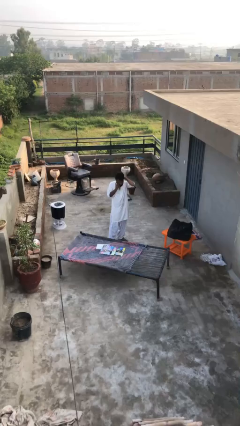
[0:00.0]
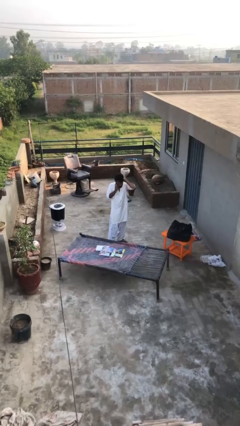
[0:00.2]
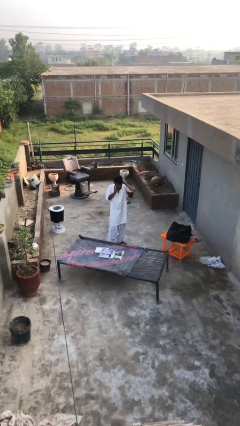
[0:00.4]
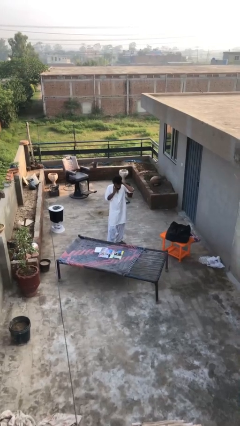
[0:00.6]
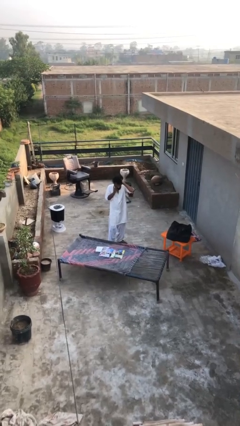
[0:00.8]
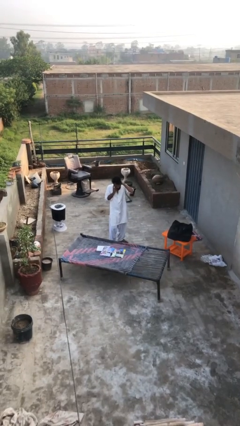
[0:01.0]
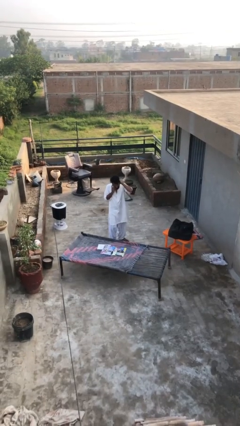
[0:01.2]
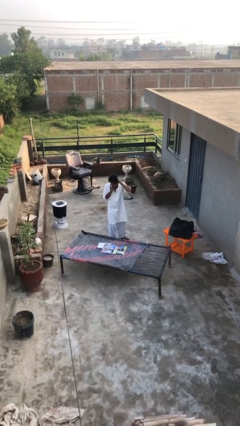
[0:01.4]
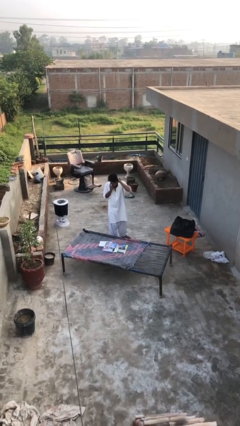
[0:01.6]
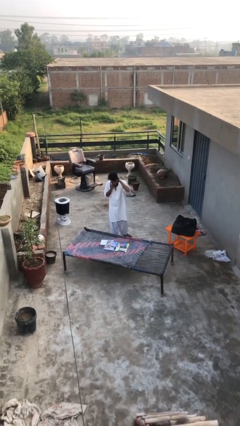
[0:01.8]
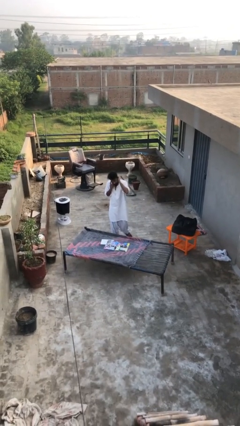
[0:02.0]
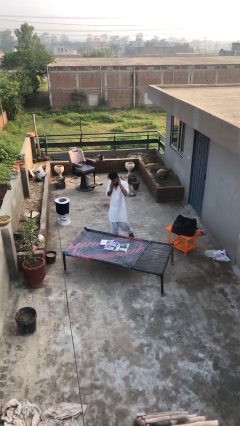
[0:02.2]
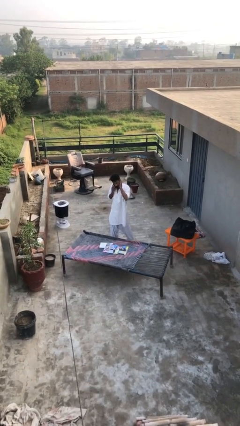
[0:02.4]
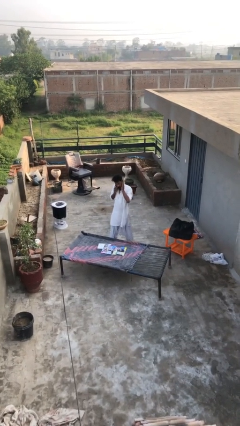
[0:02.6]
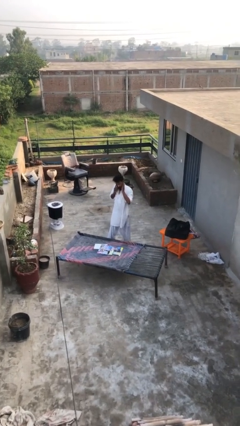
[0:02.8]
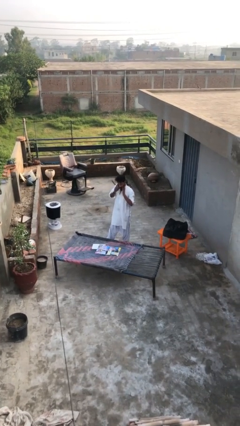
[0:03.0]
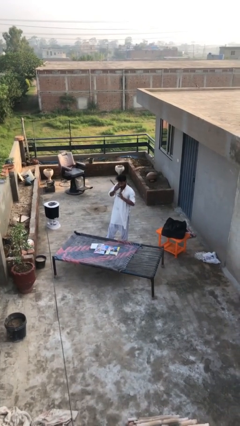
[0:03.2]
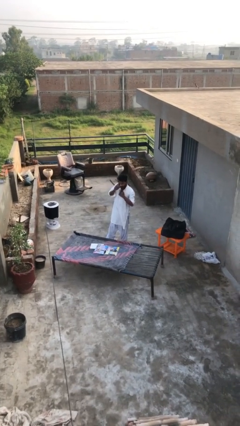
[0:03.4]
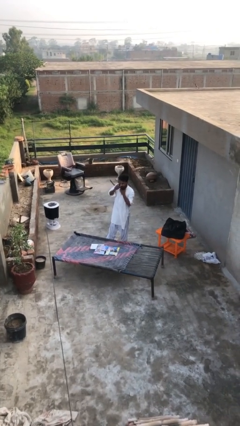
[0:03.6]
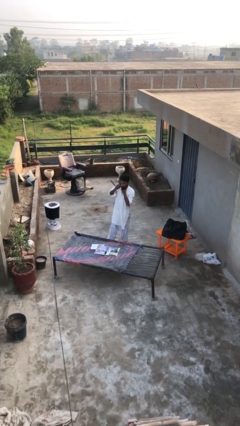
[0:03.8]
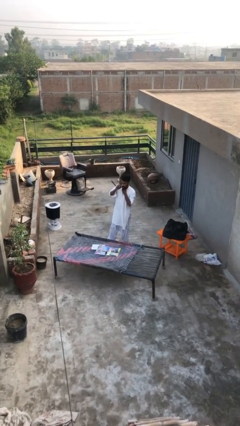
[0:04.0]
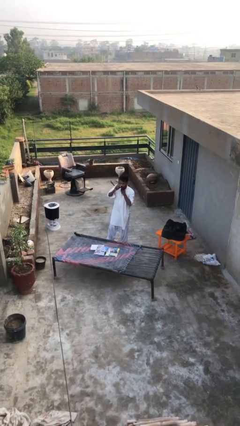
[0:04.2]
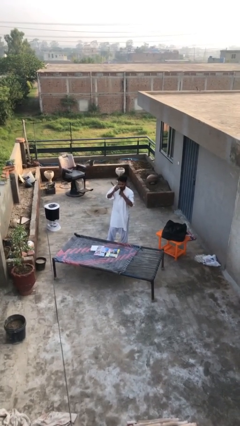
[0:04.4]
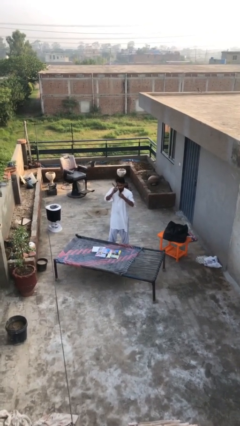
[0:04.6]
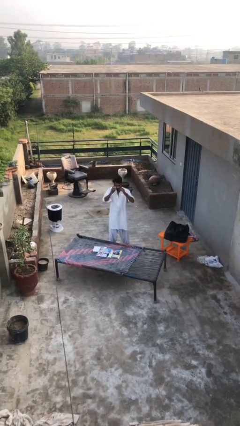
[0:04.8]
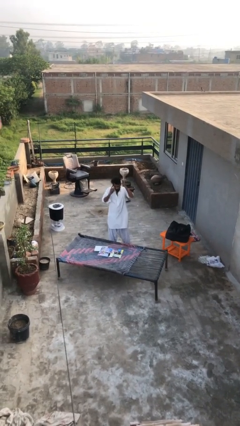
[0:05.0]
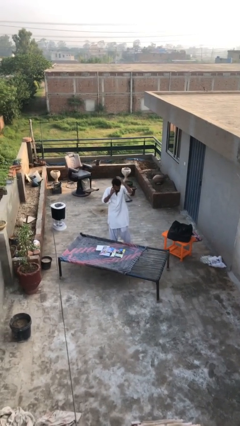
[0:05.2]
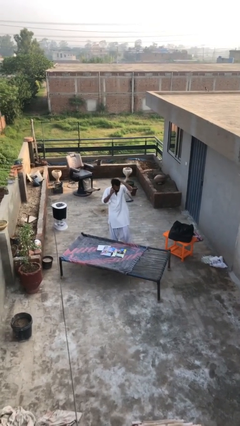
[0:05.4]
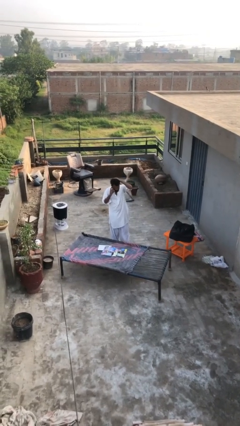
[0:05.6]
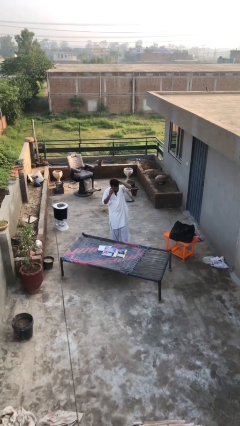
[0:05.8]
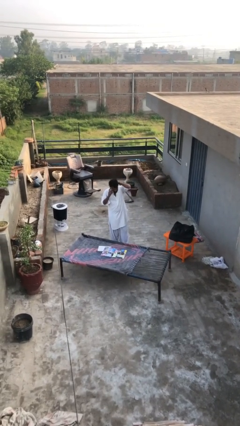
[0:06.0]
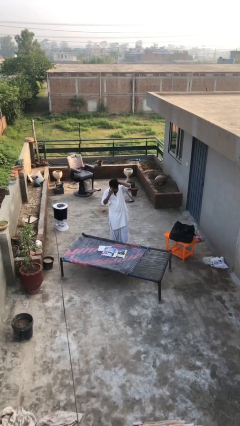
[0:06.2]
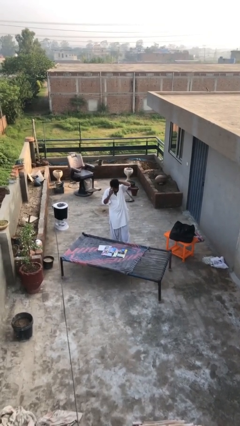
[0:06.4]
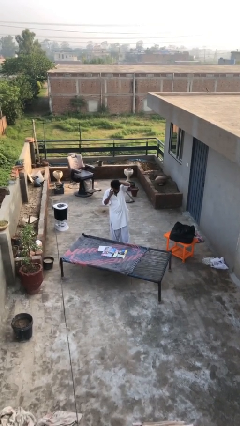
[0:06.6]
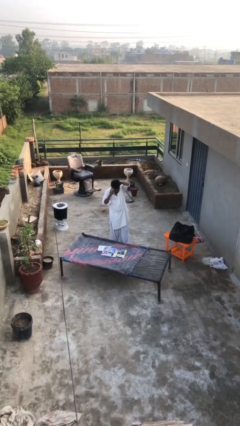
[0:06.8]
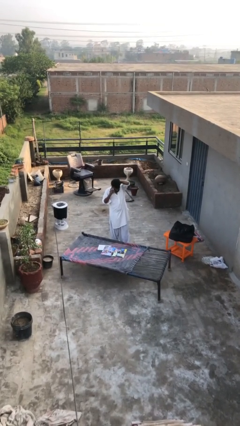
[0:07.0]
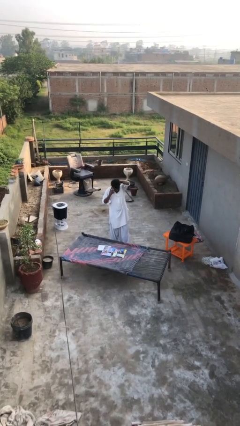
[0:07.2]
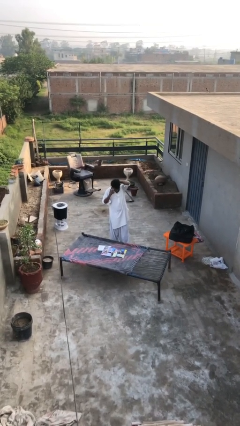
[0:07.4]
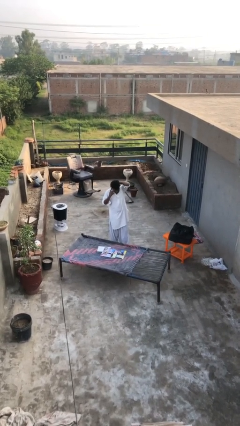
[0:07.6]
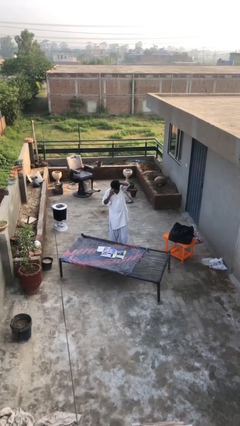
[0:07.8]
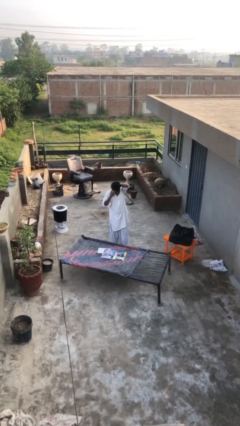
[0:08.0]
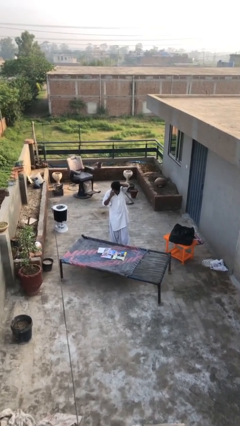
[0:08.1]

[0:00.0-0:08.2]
person talks on phone

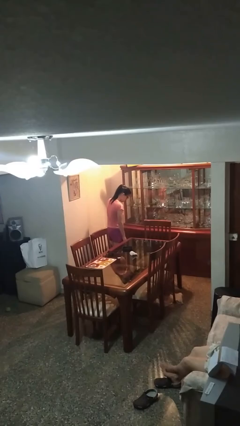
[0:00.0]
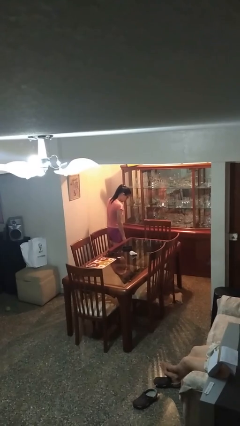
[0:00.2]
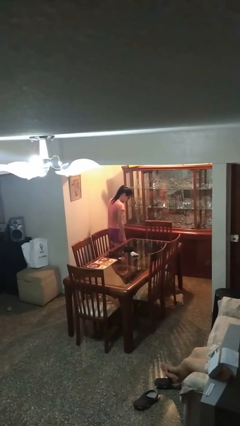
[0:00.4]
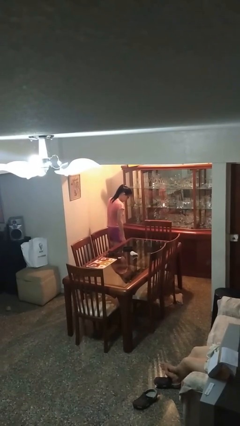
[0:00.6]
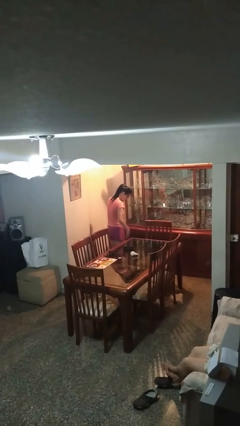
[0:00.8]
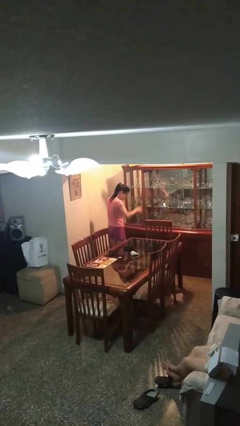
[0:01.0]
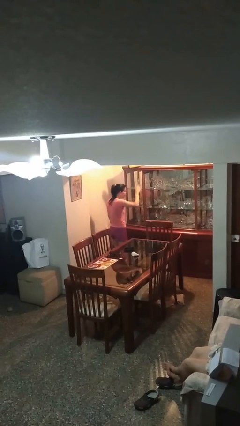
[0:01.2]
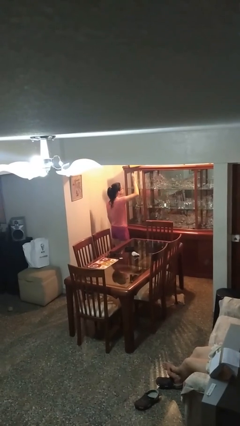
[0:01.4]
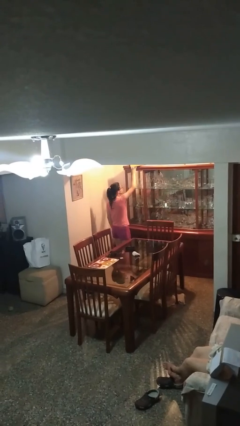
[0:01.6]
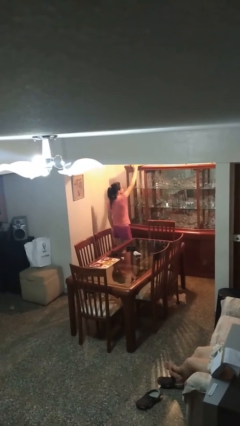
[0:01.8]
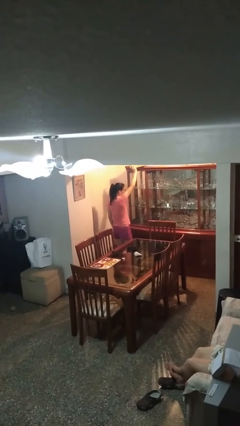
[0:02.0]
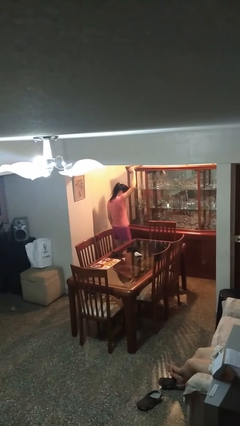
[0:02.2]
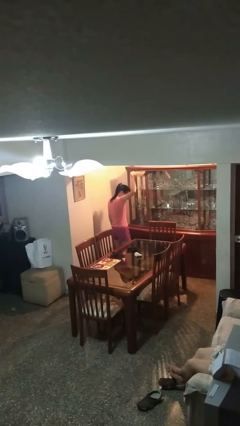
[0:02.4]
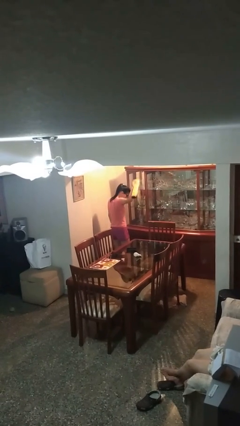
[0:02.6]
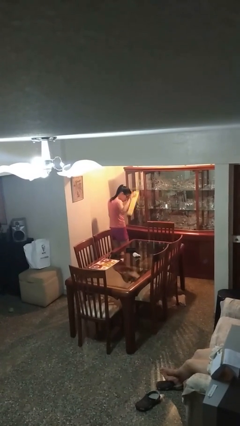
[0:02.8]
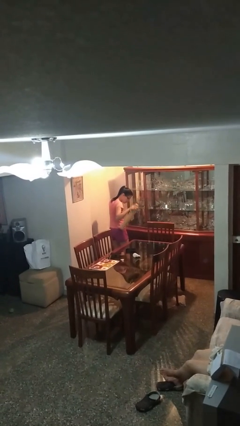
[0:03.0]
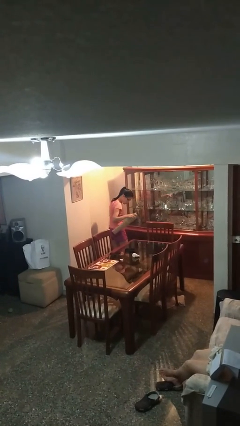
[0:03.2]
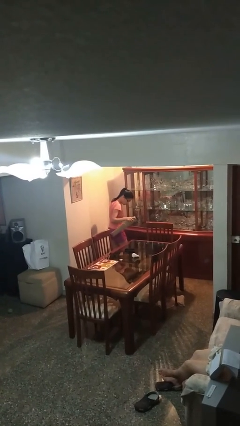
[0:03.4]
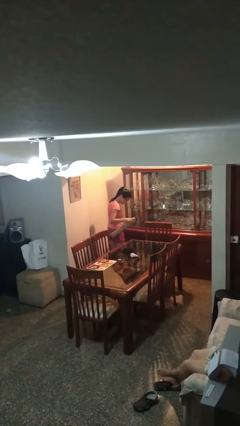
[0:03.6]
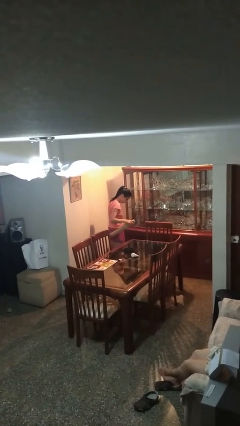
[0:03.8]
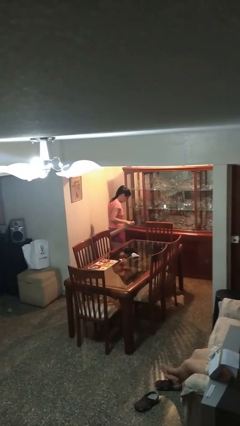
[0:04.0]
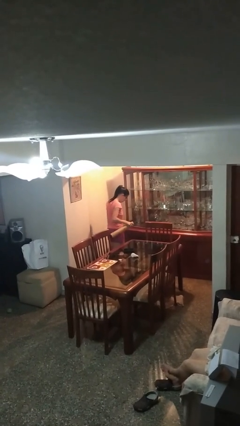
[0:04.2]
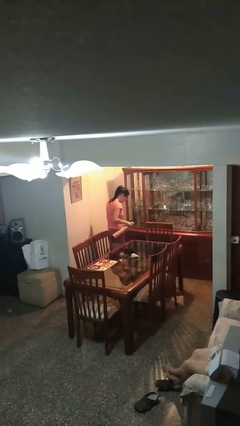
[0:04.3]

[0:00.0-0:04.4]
person picks up object from shelf

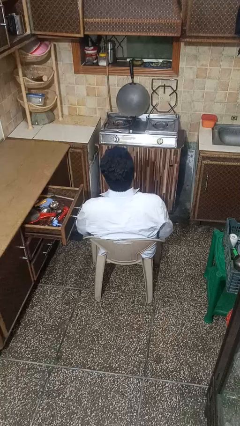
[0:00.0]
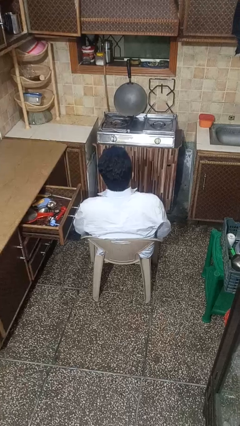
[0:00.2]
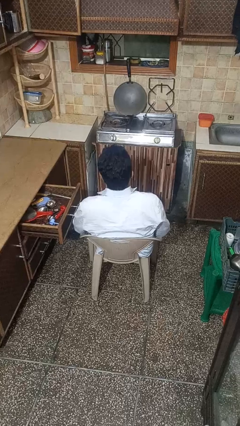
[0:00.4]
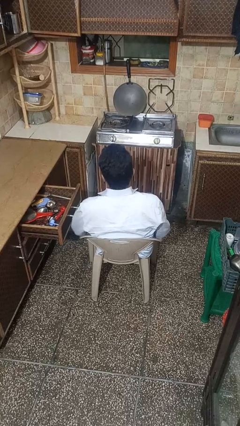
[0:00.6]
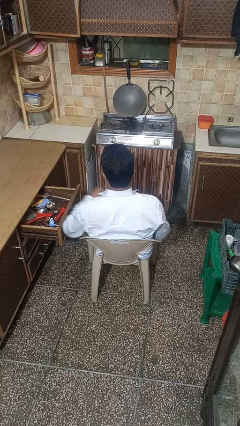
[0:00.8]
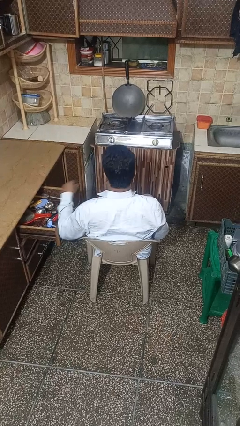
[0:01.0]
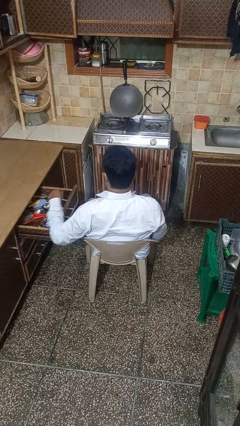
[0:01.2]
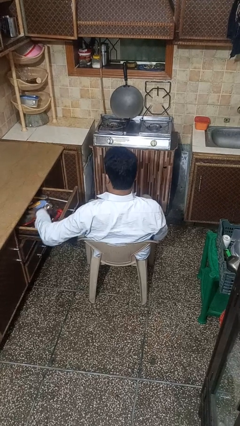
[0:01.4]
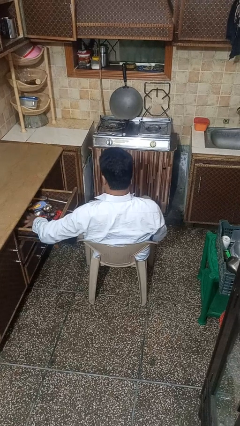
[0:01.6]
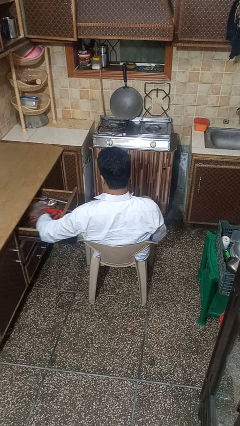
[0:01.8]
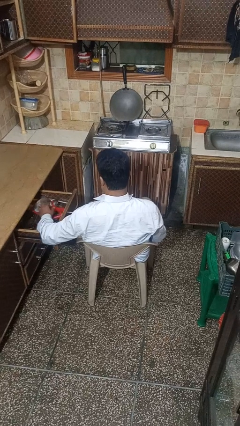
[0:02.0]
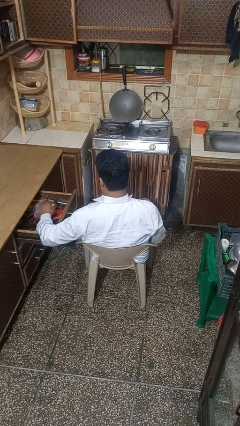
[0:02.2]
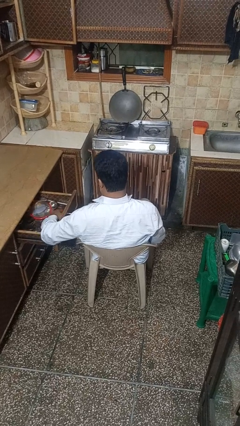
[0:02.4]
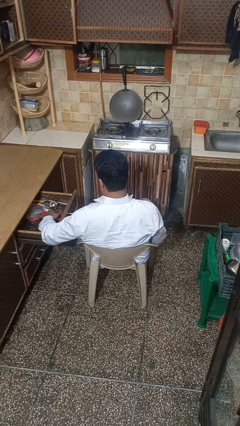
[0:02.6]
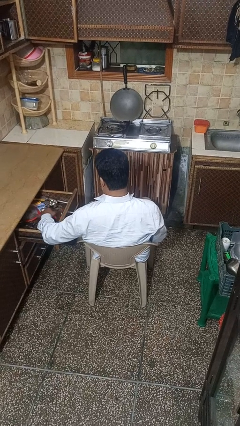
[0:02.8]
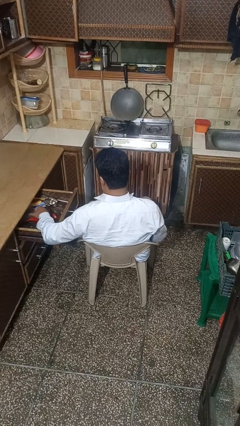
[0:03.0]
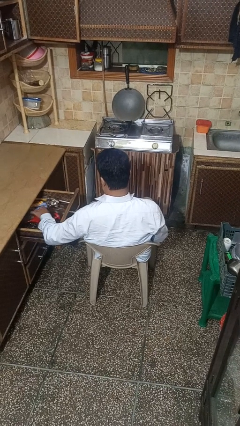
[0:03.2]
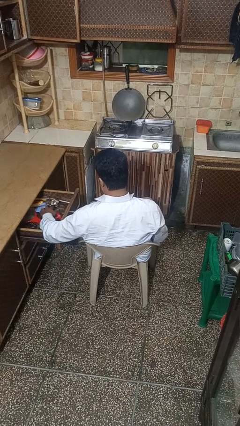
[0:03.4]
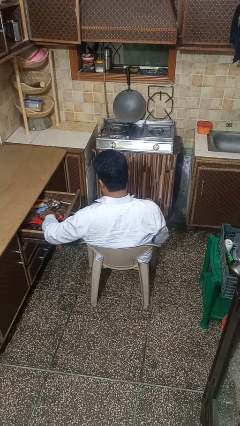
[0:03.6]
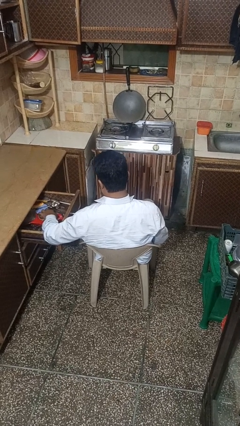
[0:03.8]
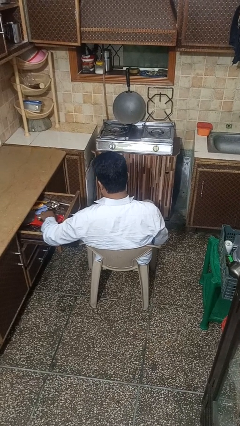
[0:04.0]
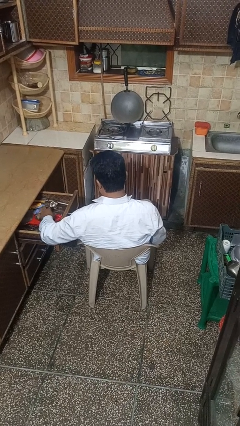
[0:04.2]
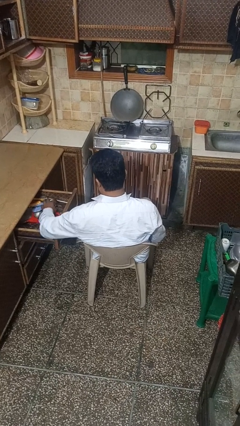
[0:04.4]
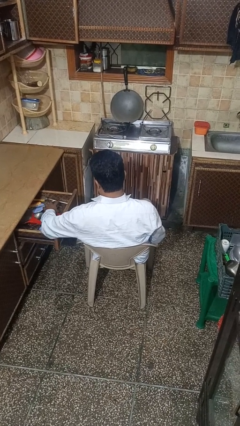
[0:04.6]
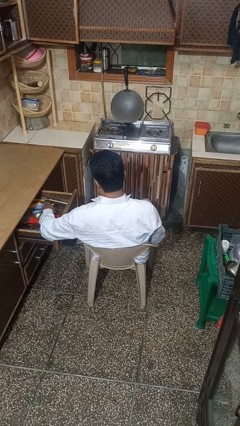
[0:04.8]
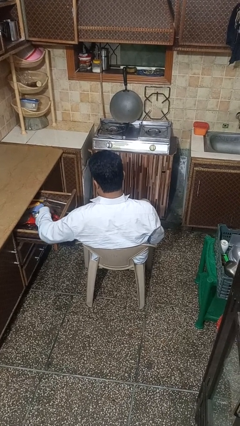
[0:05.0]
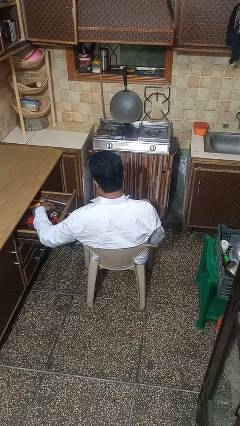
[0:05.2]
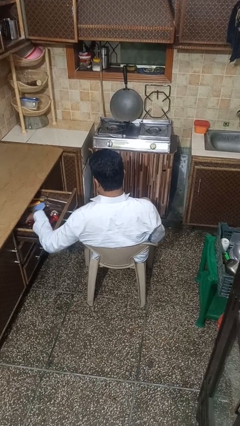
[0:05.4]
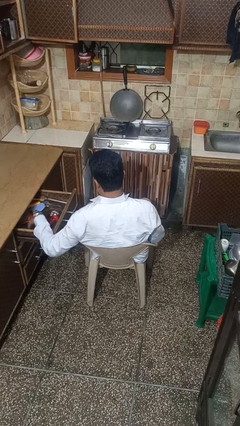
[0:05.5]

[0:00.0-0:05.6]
person searches in kitchen drawer
